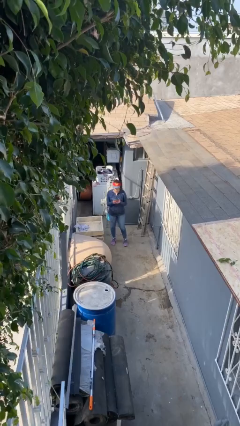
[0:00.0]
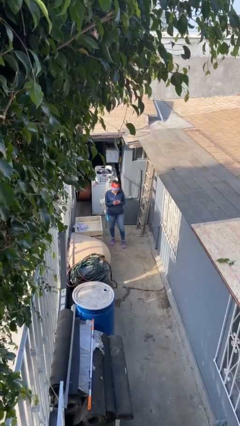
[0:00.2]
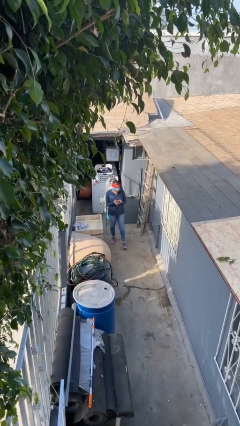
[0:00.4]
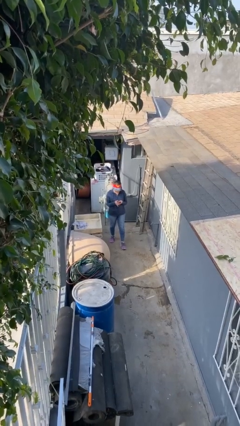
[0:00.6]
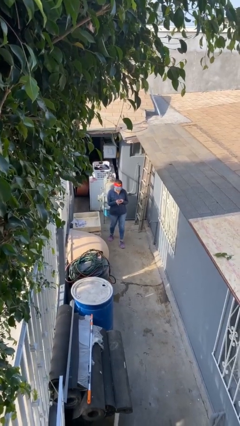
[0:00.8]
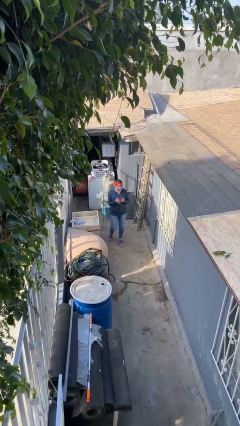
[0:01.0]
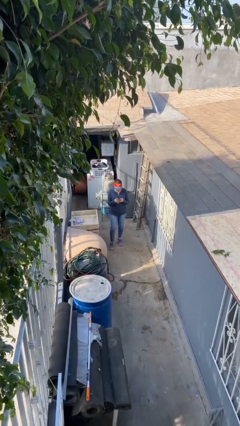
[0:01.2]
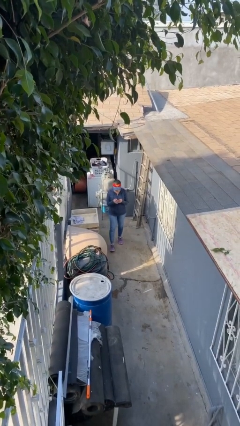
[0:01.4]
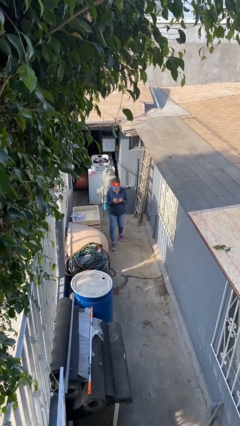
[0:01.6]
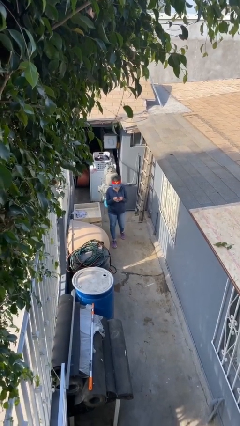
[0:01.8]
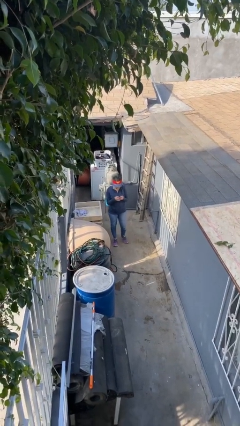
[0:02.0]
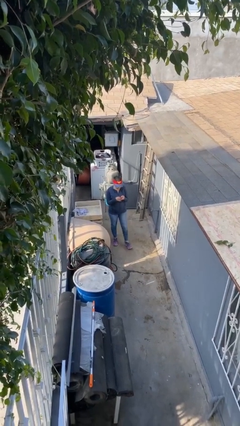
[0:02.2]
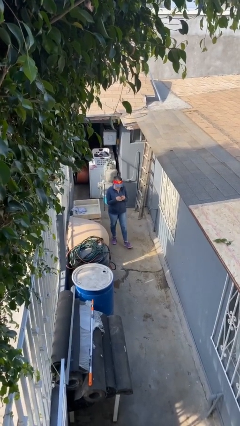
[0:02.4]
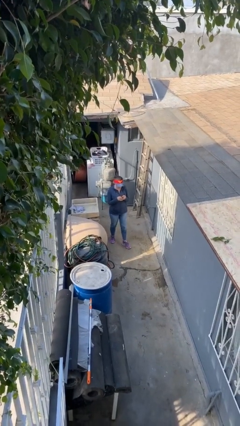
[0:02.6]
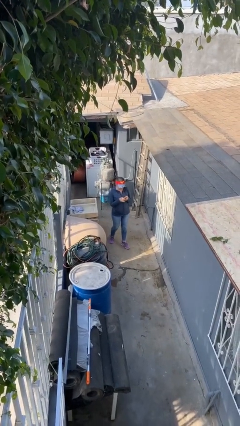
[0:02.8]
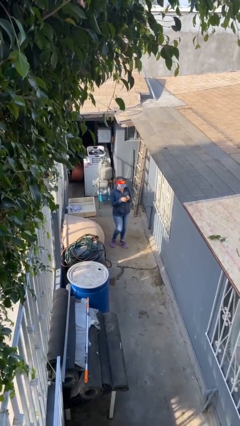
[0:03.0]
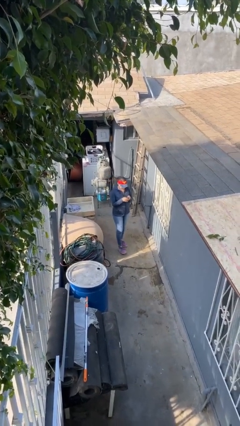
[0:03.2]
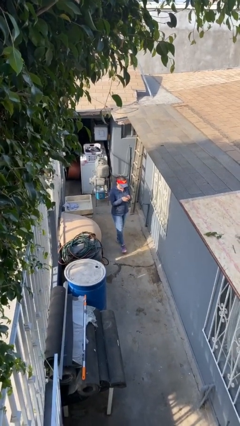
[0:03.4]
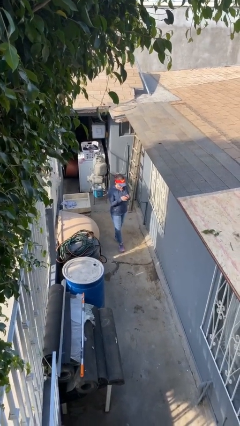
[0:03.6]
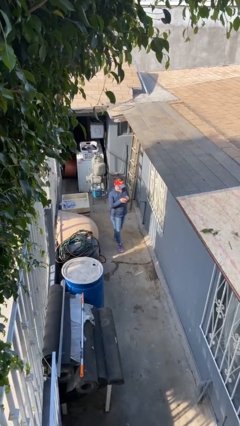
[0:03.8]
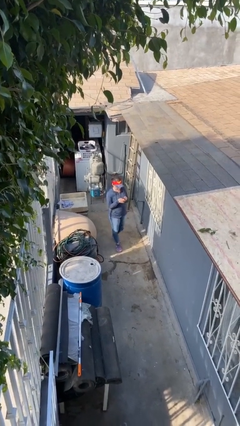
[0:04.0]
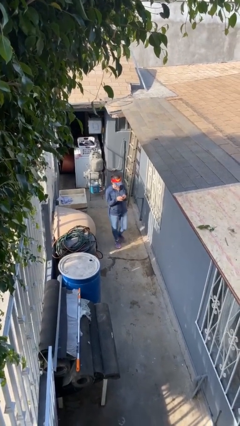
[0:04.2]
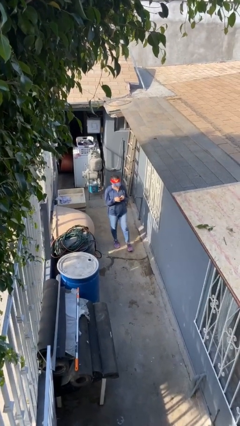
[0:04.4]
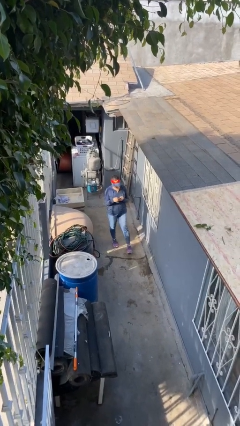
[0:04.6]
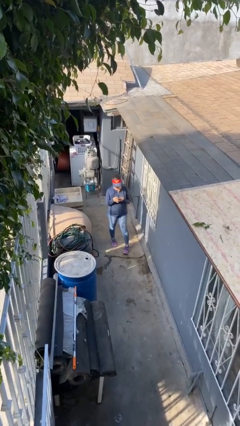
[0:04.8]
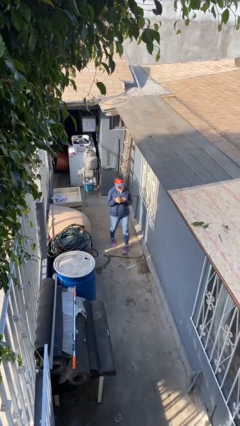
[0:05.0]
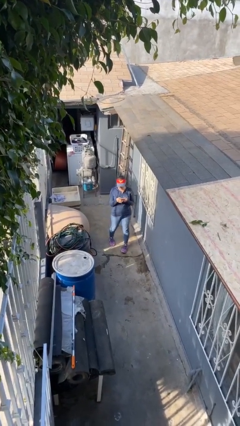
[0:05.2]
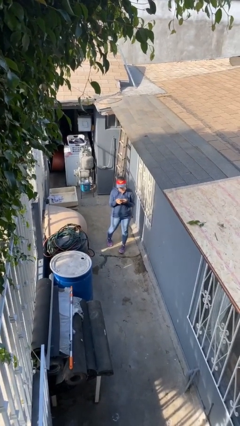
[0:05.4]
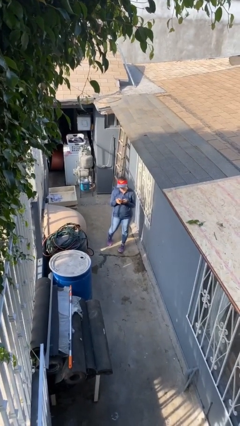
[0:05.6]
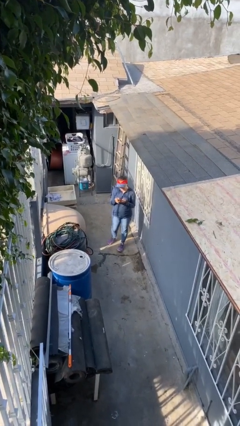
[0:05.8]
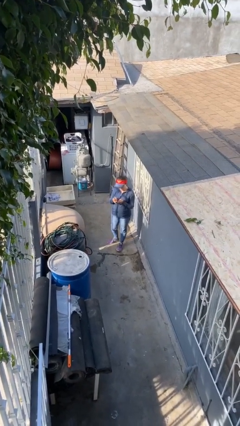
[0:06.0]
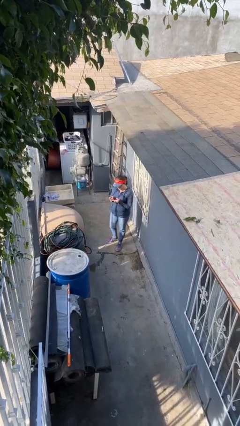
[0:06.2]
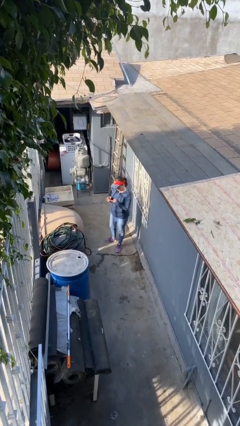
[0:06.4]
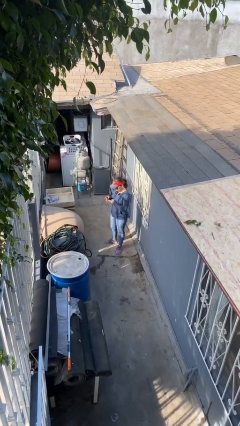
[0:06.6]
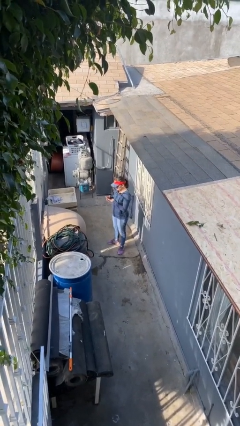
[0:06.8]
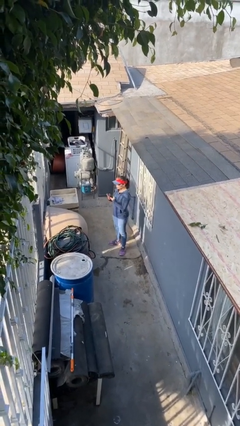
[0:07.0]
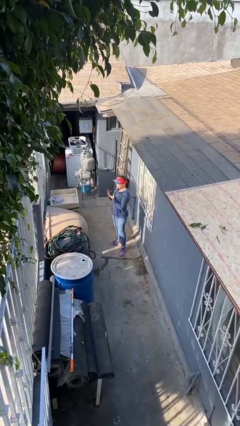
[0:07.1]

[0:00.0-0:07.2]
person texts on phone

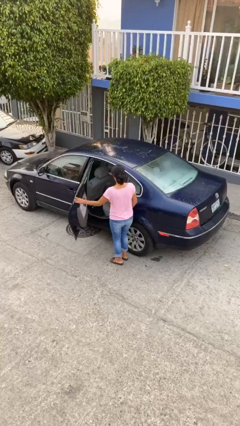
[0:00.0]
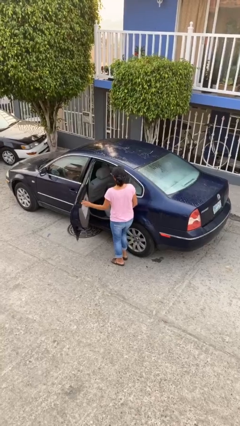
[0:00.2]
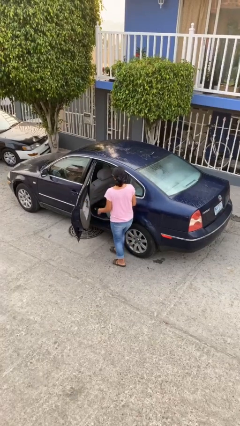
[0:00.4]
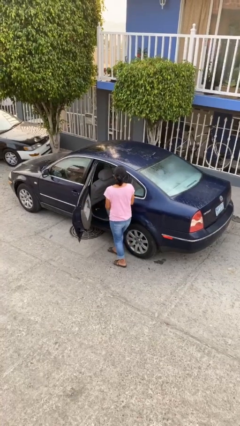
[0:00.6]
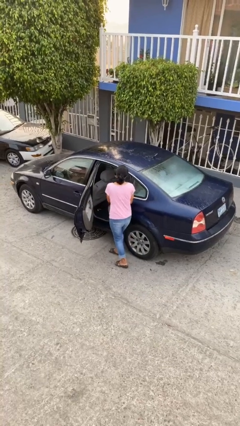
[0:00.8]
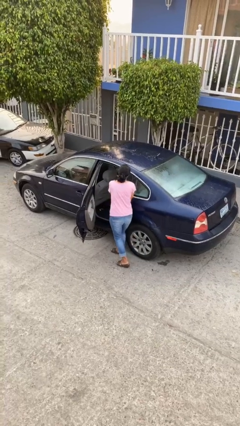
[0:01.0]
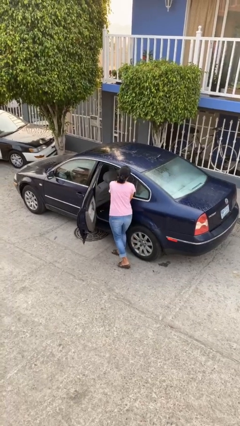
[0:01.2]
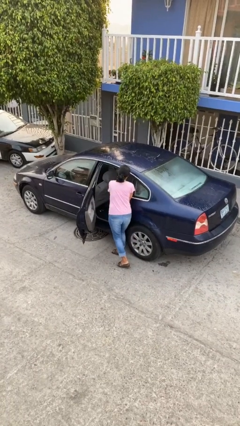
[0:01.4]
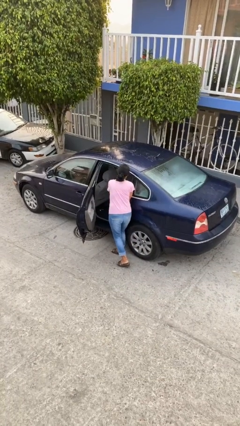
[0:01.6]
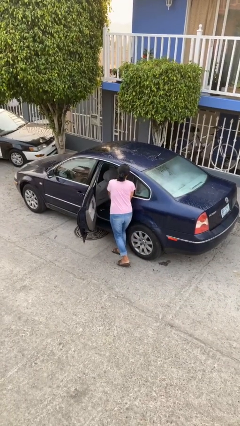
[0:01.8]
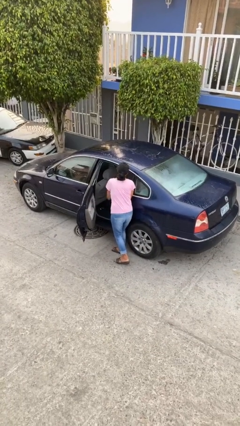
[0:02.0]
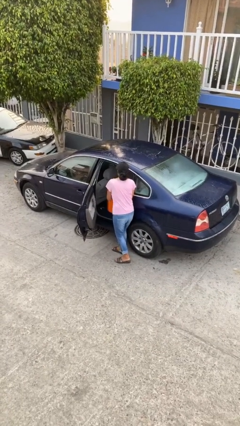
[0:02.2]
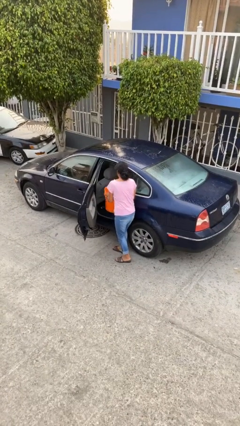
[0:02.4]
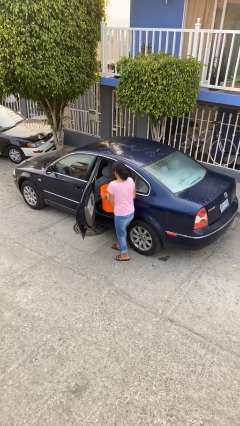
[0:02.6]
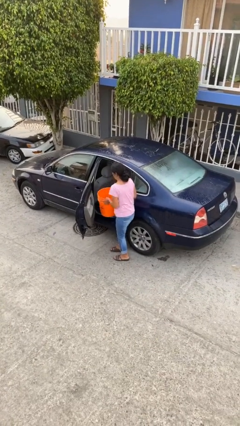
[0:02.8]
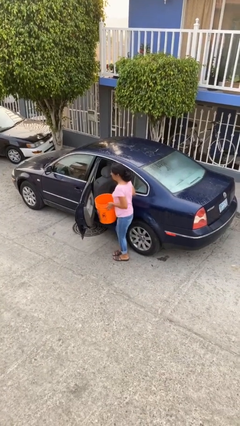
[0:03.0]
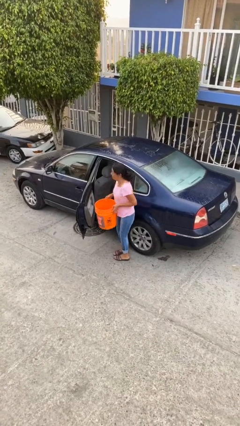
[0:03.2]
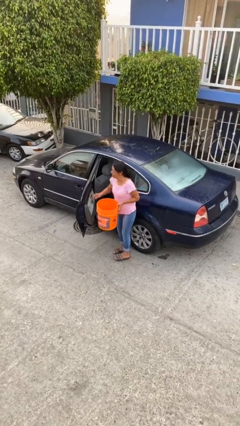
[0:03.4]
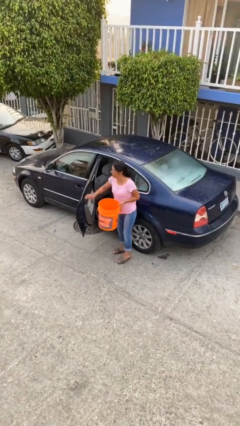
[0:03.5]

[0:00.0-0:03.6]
person unloads car

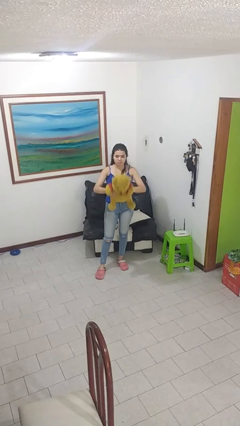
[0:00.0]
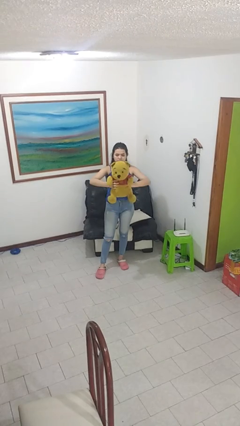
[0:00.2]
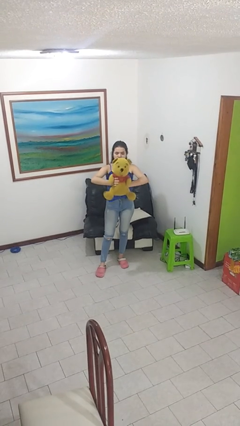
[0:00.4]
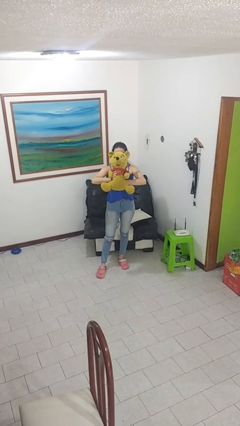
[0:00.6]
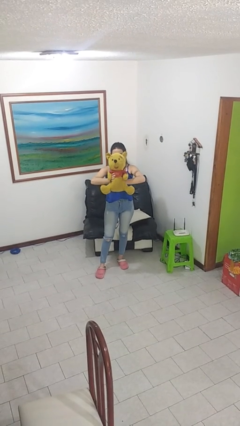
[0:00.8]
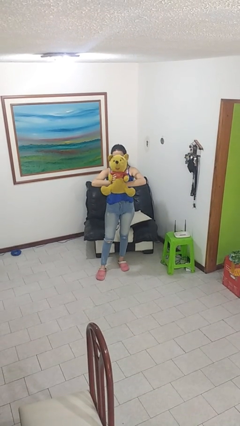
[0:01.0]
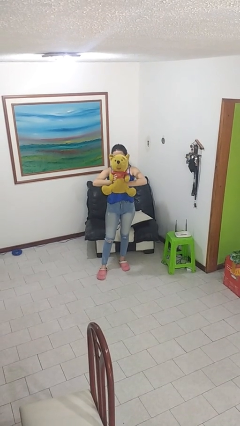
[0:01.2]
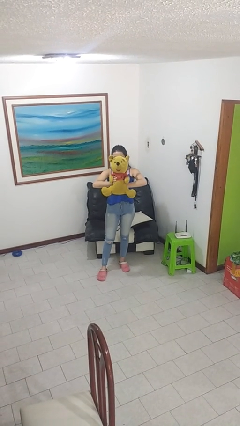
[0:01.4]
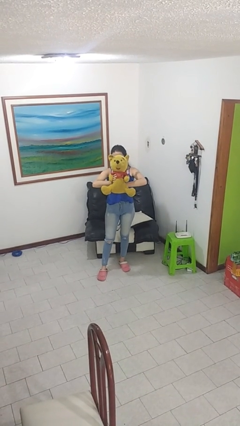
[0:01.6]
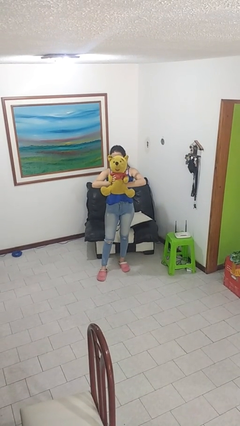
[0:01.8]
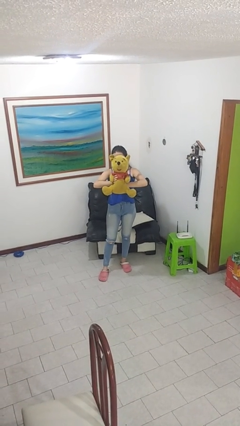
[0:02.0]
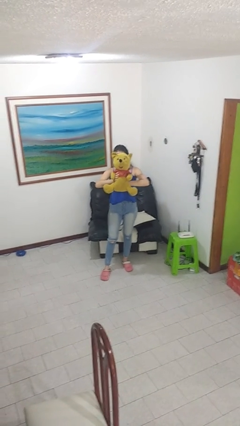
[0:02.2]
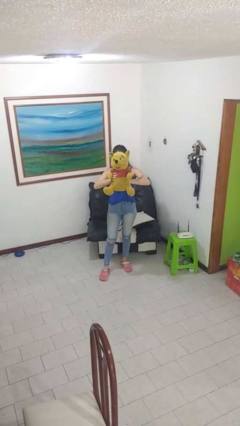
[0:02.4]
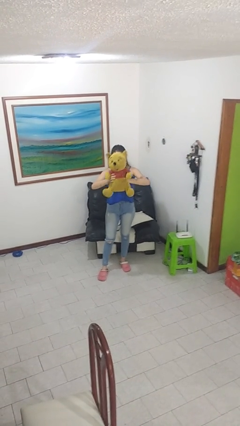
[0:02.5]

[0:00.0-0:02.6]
person squeezes object

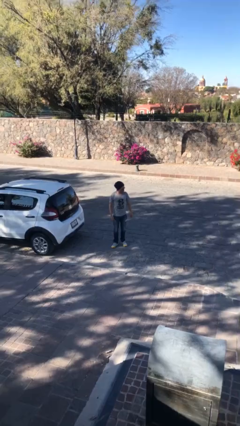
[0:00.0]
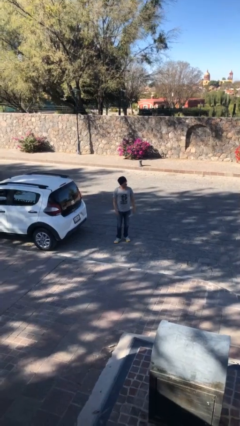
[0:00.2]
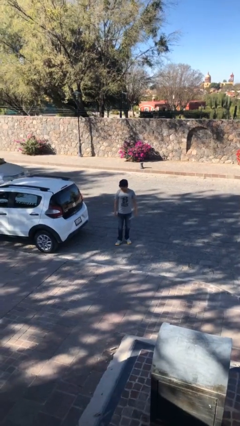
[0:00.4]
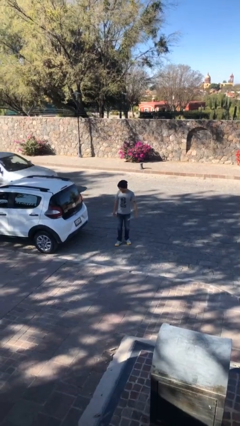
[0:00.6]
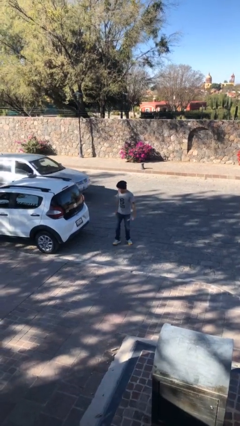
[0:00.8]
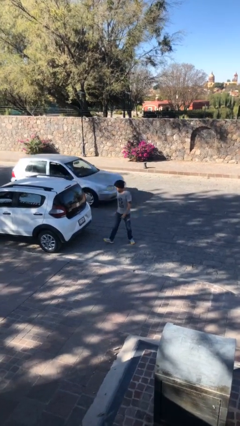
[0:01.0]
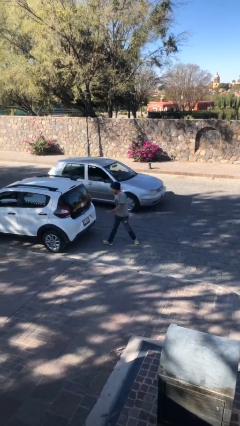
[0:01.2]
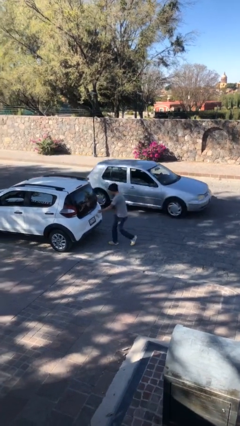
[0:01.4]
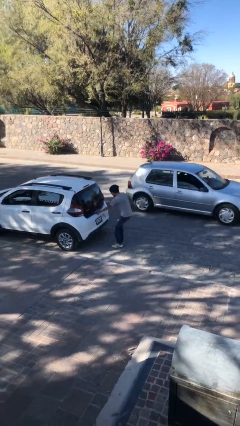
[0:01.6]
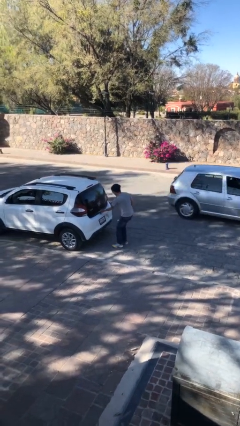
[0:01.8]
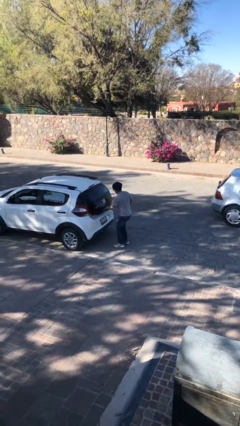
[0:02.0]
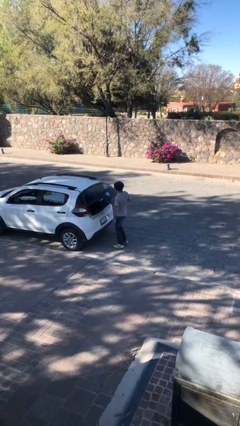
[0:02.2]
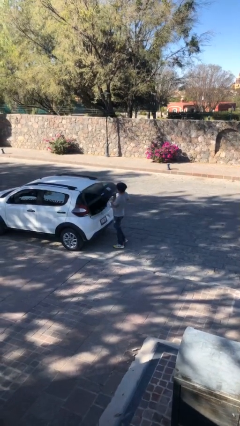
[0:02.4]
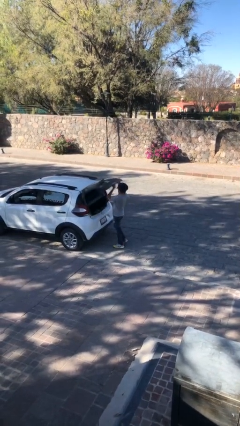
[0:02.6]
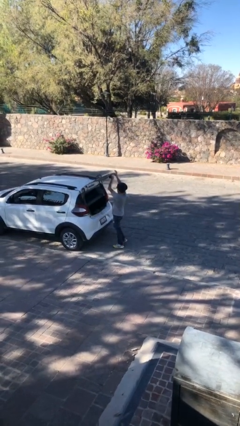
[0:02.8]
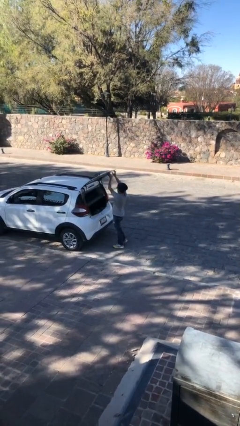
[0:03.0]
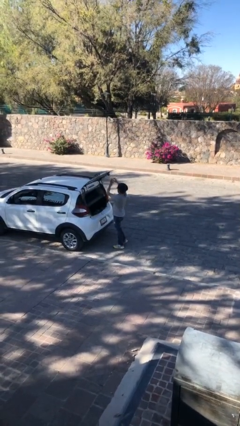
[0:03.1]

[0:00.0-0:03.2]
person opens car trunk

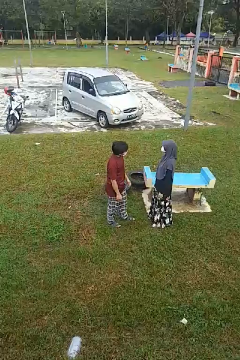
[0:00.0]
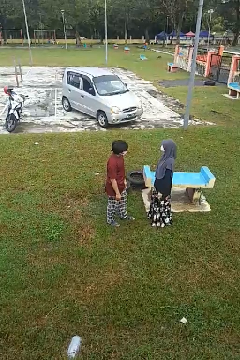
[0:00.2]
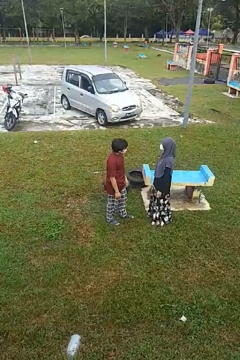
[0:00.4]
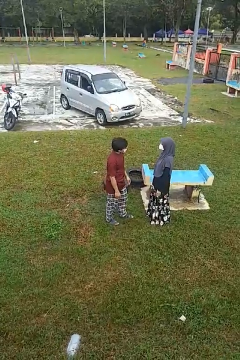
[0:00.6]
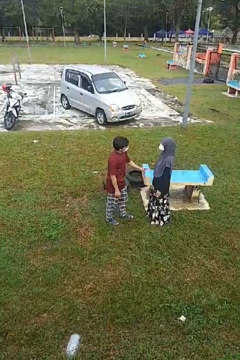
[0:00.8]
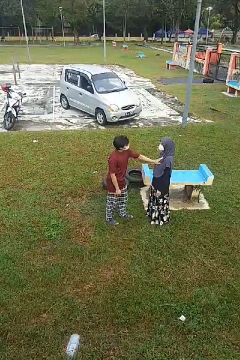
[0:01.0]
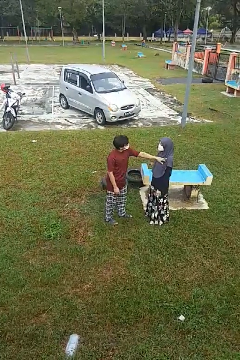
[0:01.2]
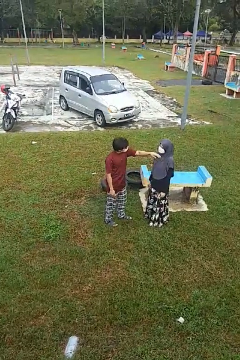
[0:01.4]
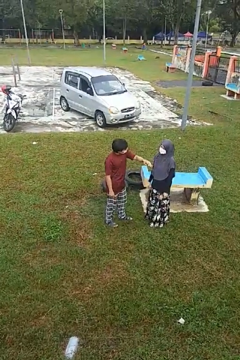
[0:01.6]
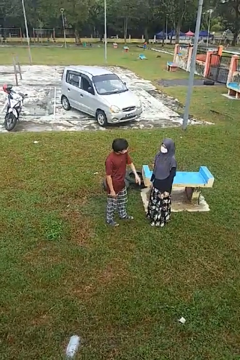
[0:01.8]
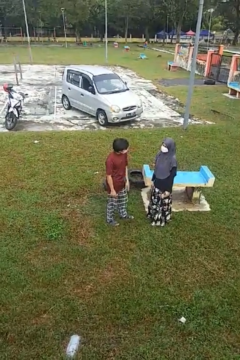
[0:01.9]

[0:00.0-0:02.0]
person shoves person
